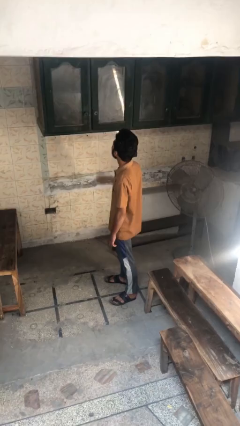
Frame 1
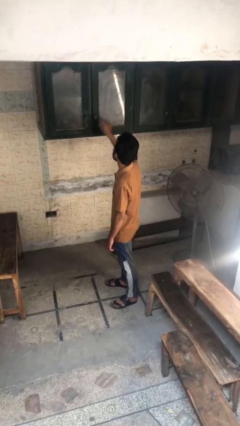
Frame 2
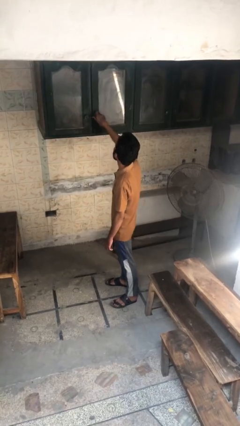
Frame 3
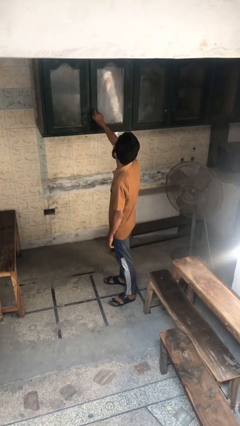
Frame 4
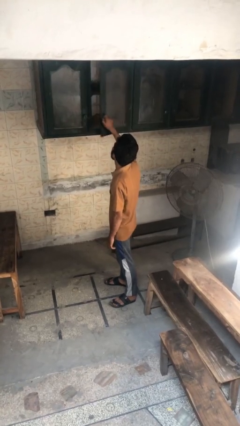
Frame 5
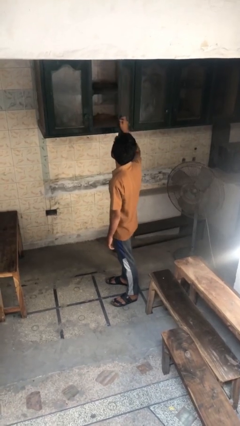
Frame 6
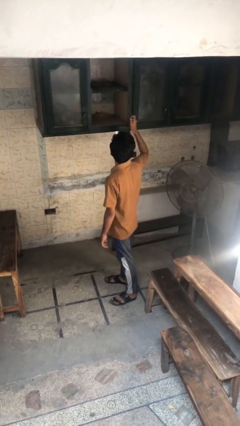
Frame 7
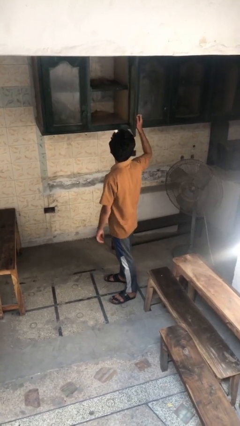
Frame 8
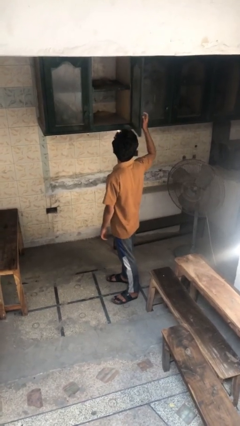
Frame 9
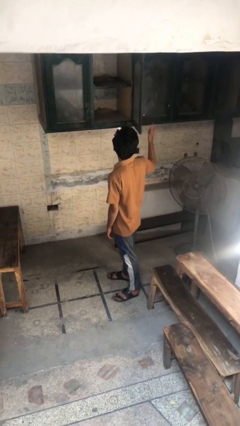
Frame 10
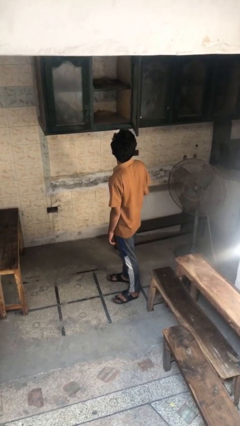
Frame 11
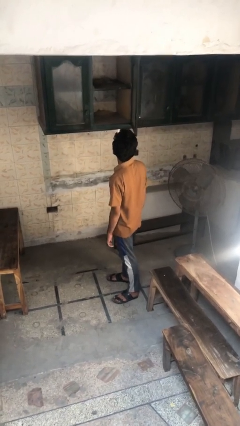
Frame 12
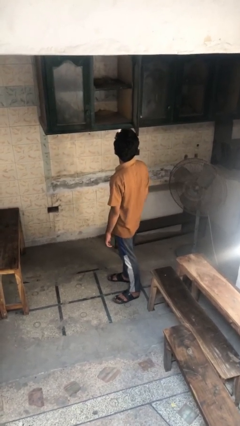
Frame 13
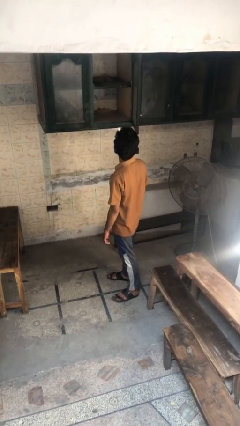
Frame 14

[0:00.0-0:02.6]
person opens cabinet

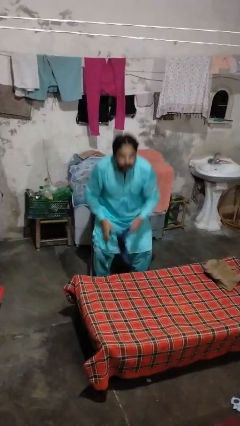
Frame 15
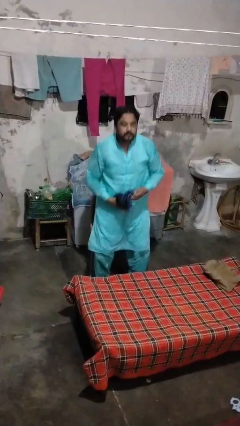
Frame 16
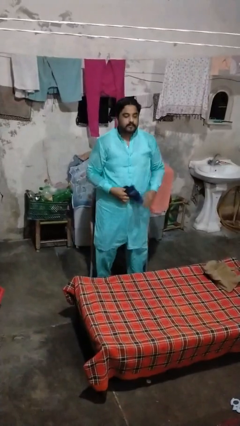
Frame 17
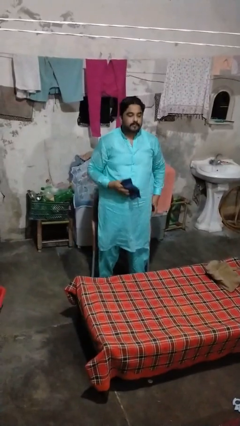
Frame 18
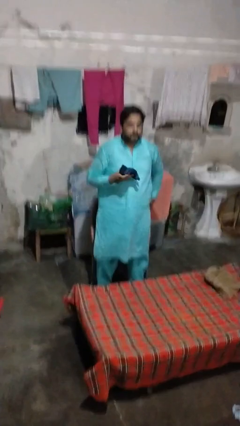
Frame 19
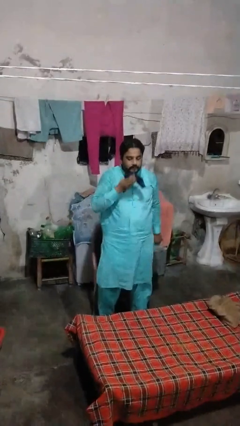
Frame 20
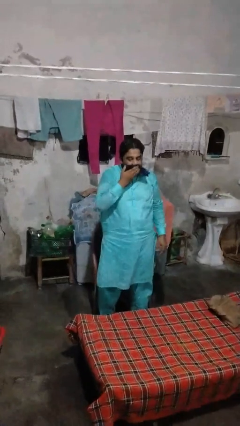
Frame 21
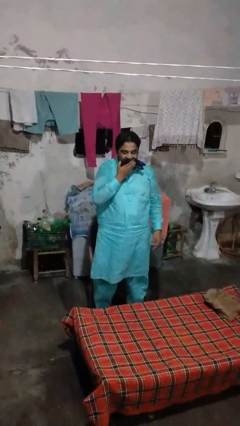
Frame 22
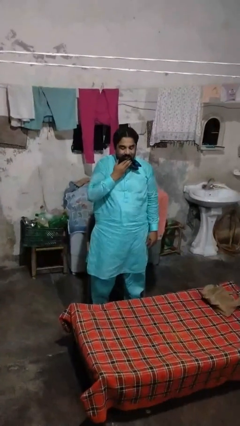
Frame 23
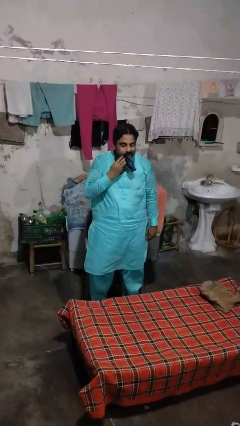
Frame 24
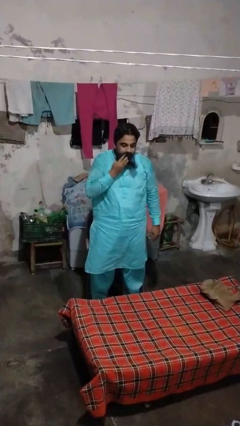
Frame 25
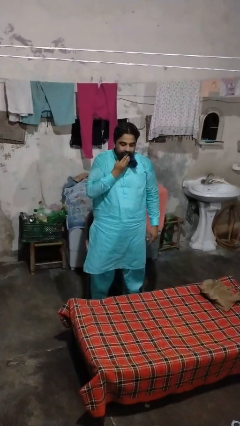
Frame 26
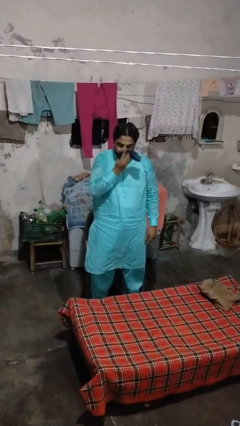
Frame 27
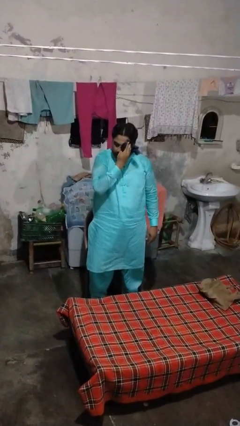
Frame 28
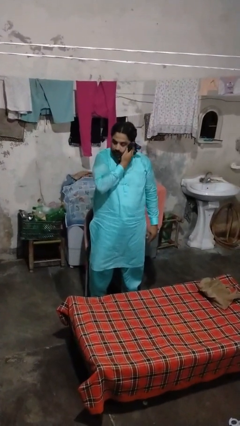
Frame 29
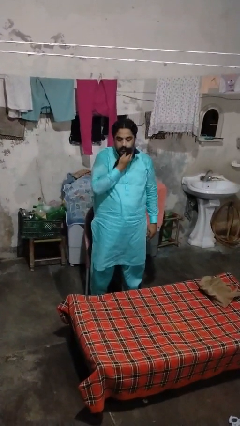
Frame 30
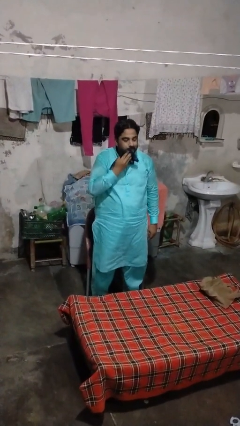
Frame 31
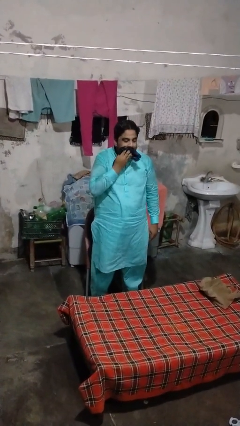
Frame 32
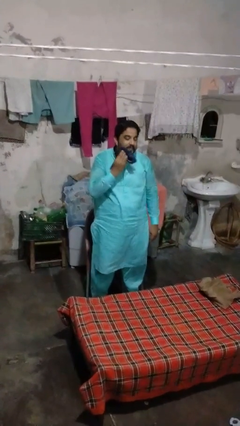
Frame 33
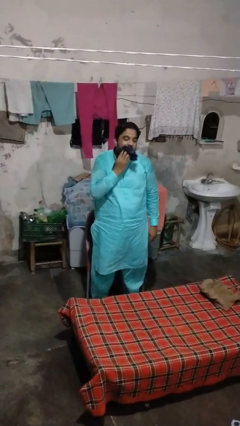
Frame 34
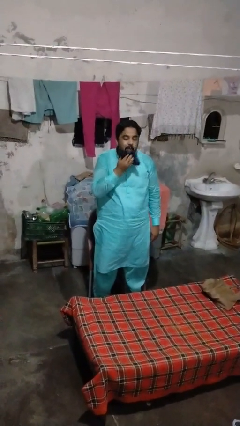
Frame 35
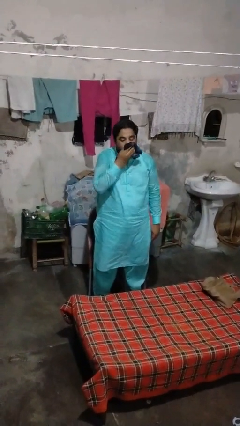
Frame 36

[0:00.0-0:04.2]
person wipes mouth with napkin

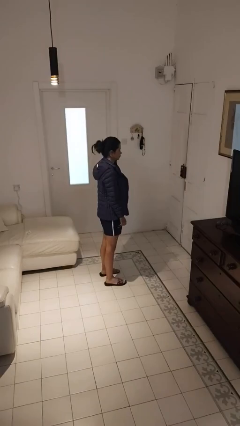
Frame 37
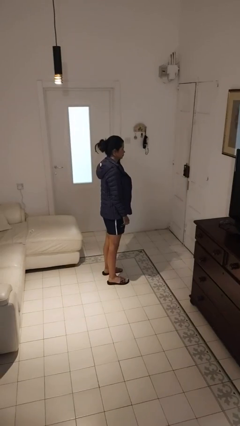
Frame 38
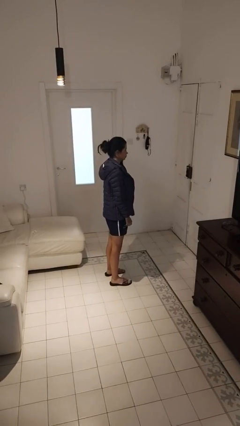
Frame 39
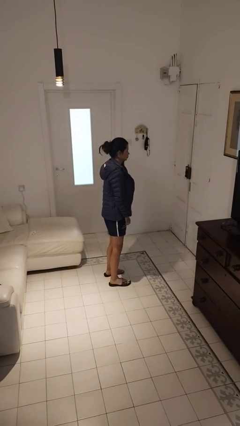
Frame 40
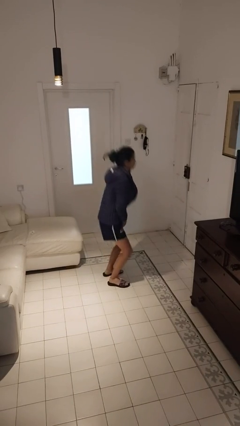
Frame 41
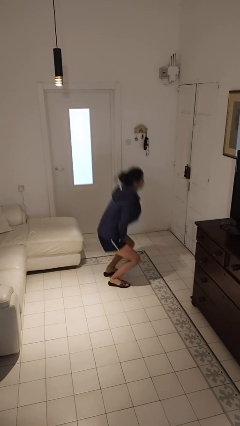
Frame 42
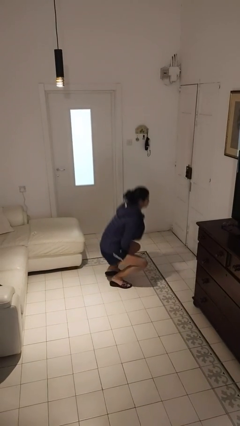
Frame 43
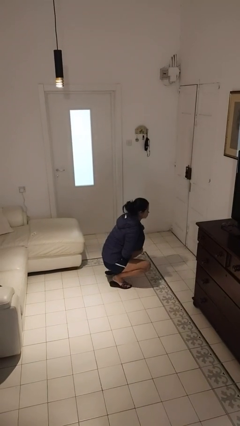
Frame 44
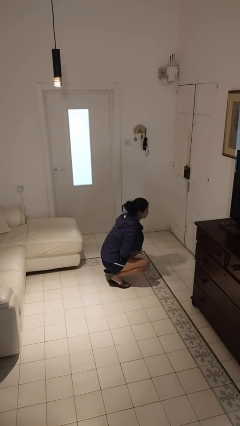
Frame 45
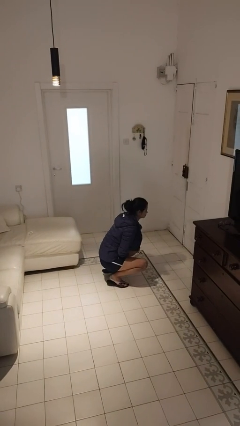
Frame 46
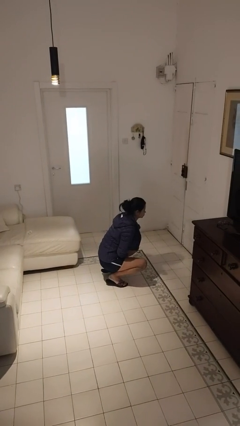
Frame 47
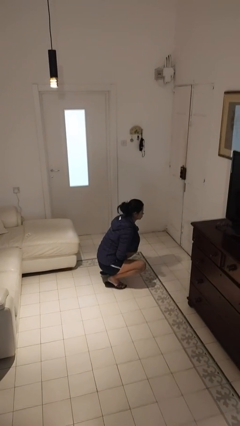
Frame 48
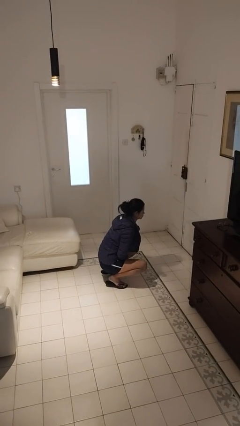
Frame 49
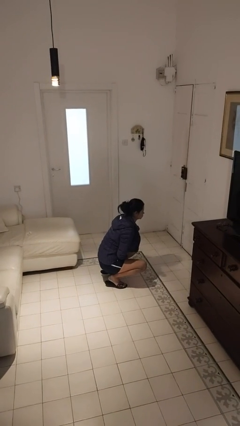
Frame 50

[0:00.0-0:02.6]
person squats

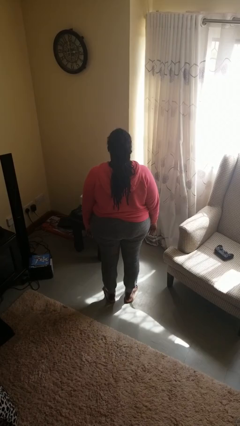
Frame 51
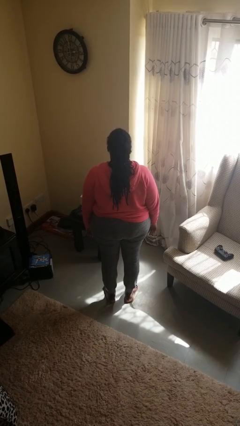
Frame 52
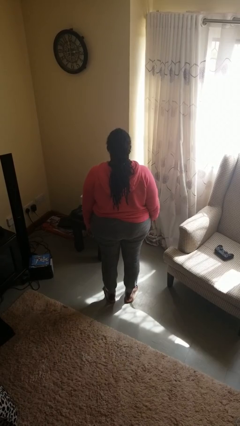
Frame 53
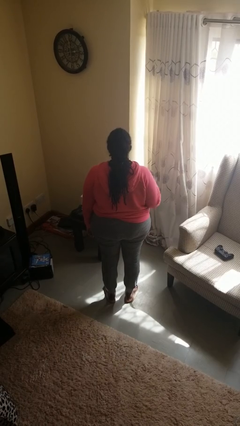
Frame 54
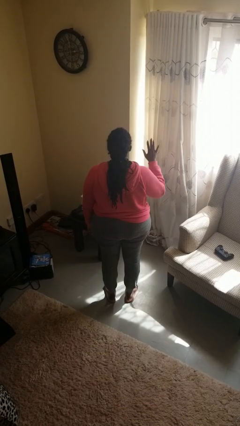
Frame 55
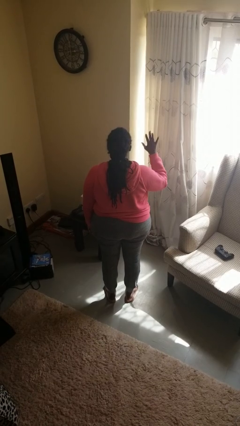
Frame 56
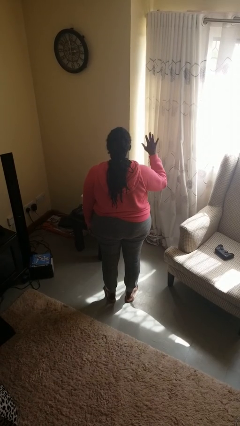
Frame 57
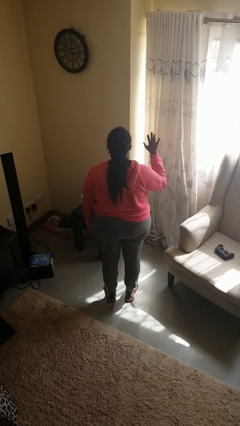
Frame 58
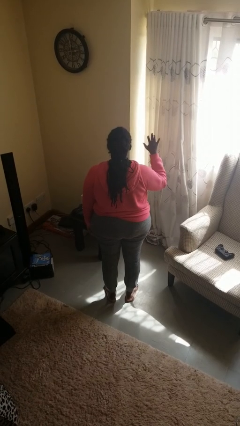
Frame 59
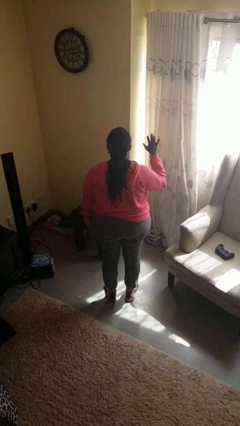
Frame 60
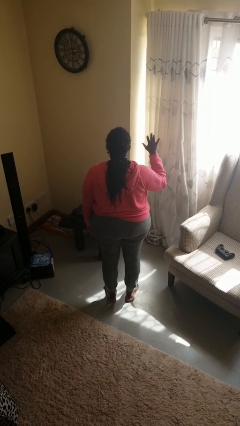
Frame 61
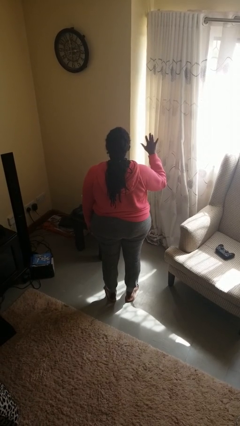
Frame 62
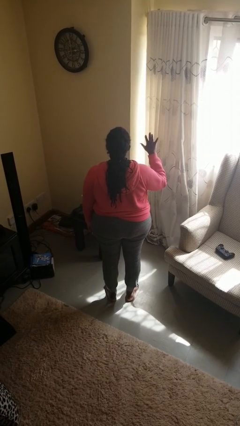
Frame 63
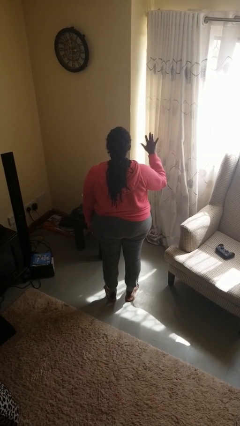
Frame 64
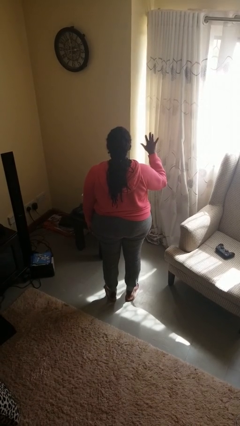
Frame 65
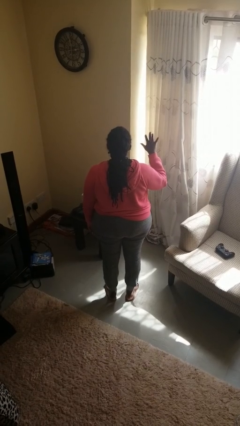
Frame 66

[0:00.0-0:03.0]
person gestures number five

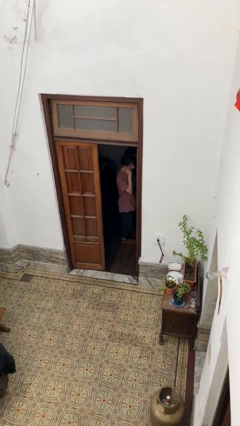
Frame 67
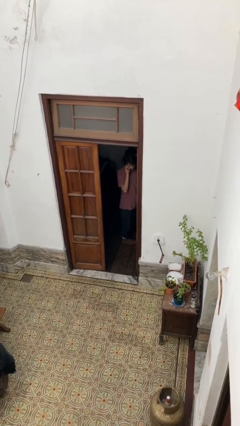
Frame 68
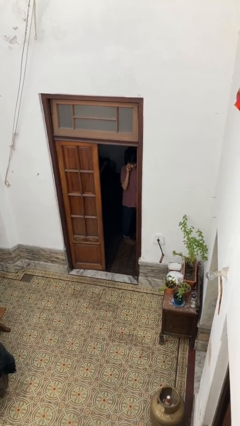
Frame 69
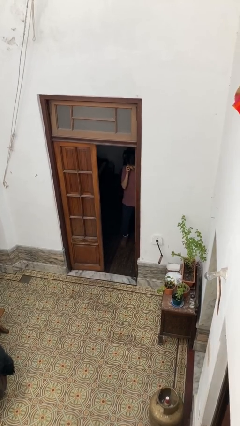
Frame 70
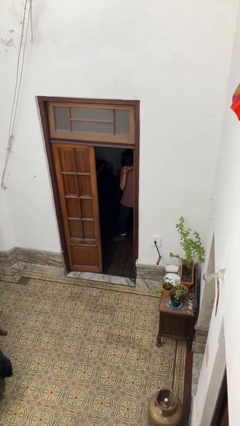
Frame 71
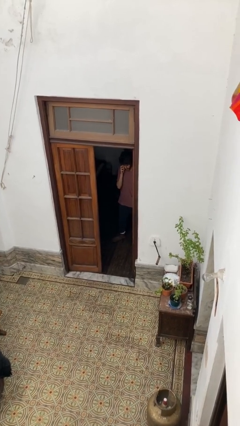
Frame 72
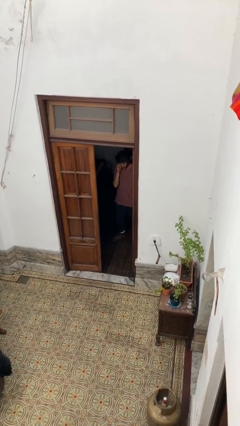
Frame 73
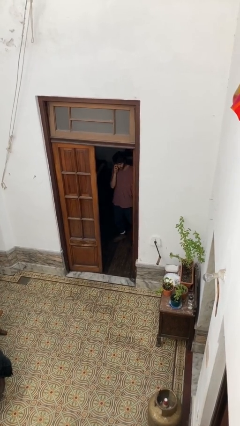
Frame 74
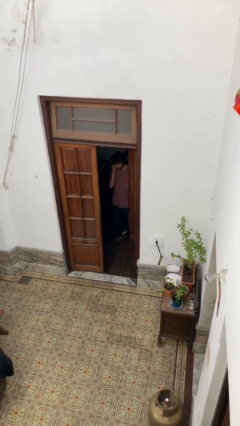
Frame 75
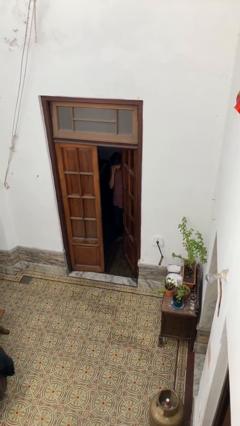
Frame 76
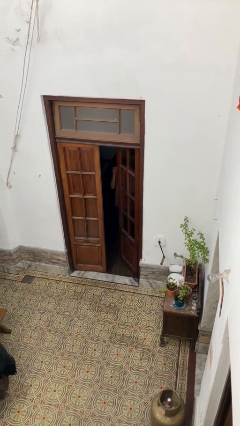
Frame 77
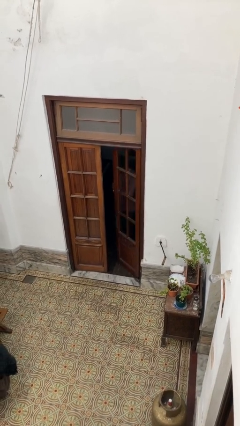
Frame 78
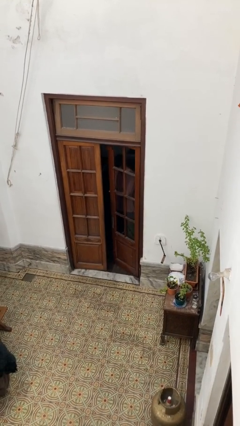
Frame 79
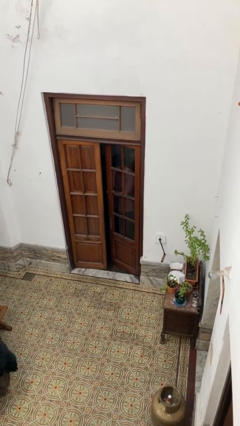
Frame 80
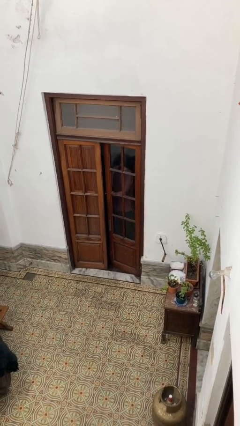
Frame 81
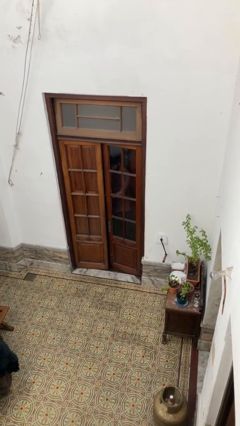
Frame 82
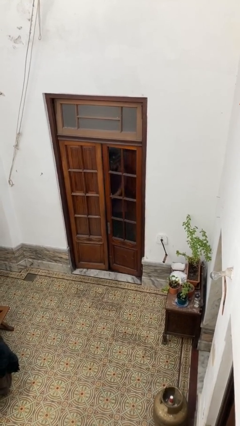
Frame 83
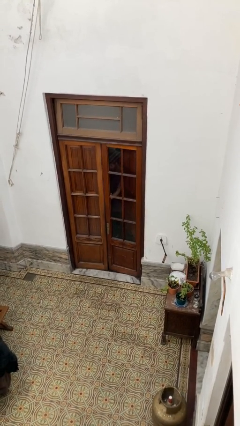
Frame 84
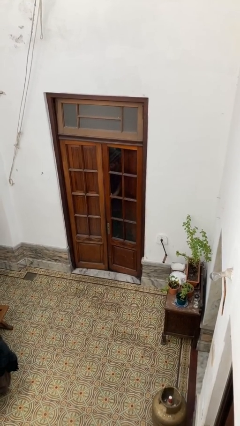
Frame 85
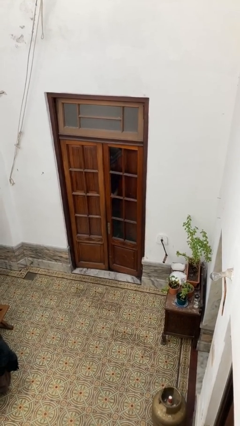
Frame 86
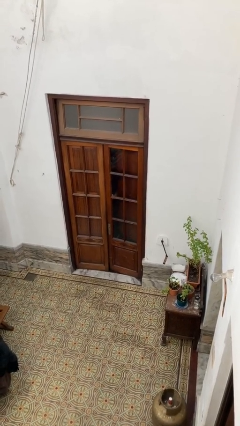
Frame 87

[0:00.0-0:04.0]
person closes facility door

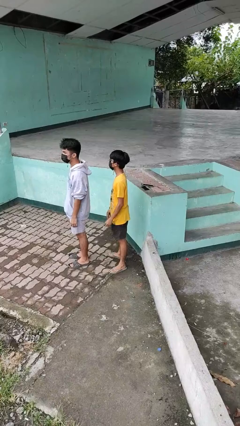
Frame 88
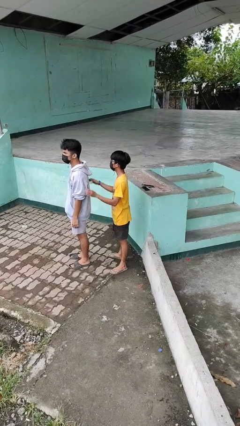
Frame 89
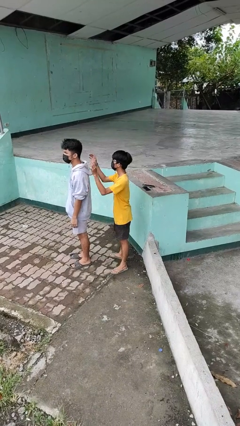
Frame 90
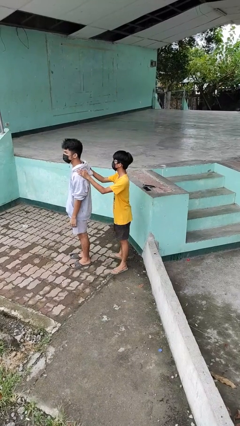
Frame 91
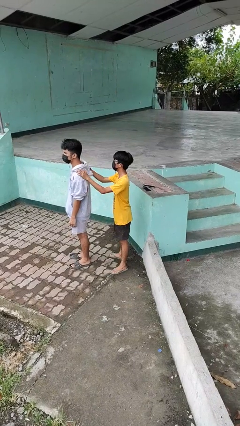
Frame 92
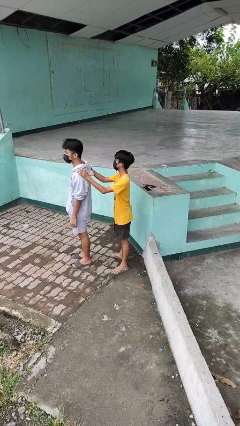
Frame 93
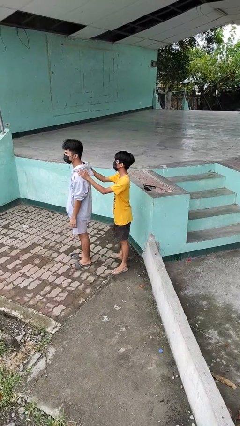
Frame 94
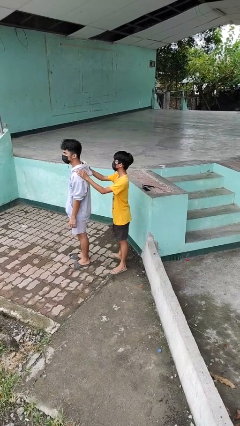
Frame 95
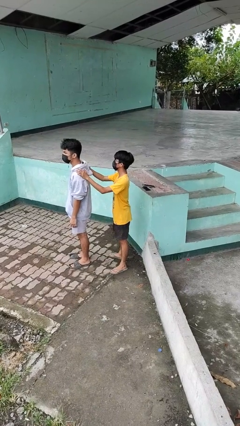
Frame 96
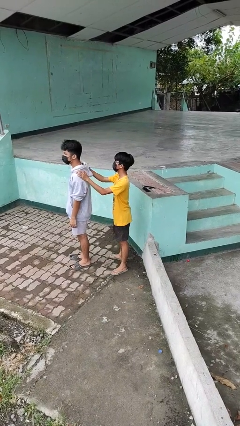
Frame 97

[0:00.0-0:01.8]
person grabs person by shoulder
